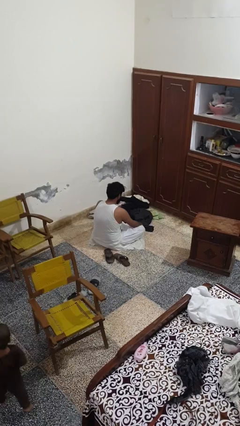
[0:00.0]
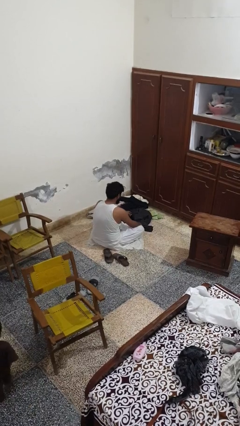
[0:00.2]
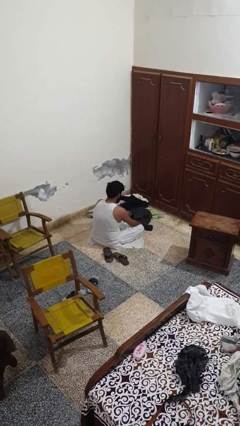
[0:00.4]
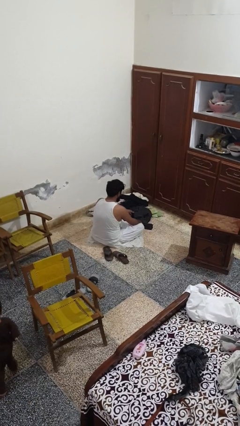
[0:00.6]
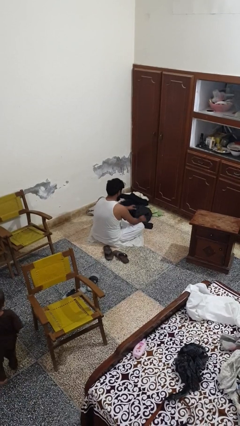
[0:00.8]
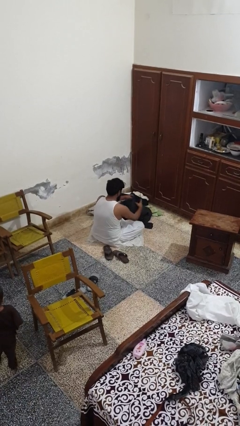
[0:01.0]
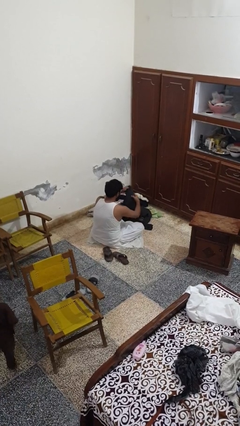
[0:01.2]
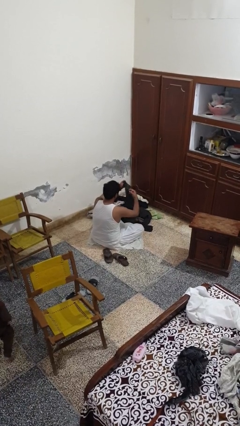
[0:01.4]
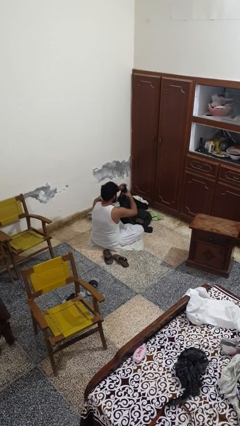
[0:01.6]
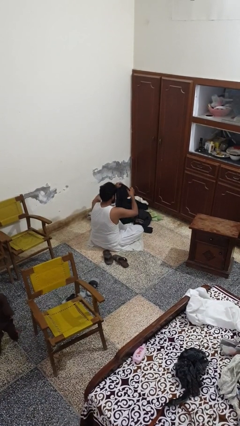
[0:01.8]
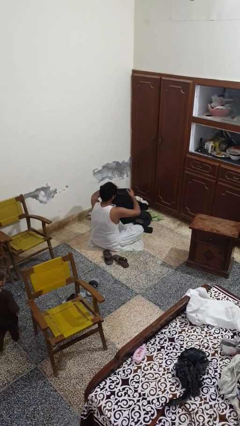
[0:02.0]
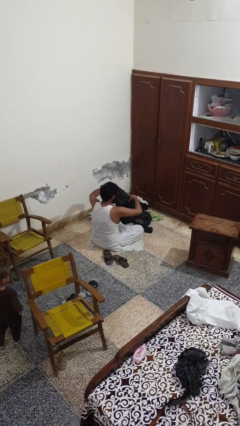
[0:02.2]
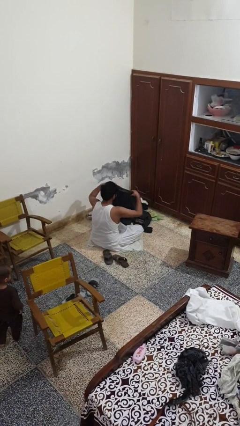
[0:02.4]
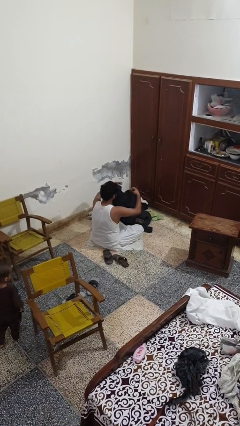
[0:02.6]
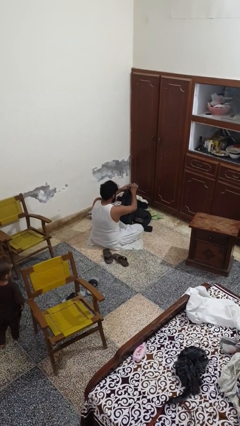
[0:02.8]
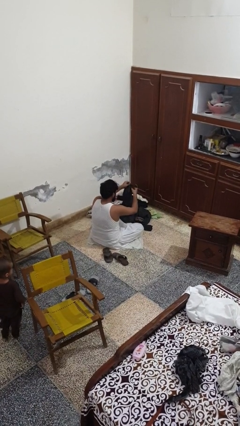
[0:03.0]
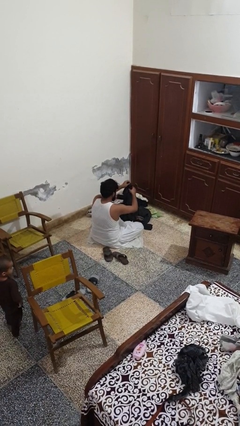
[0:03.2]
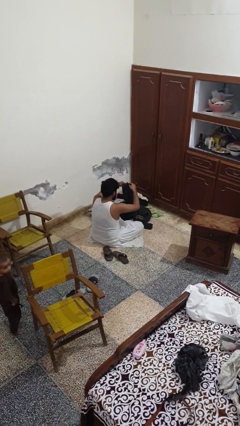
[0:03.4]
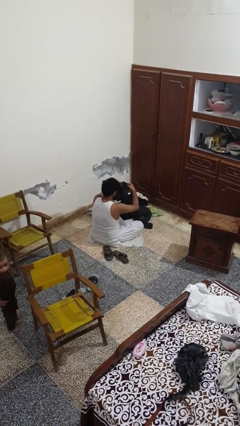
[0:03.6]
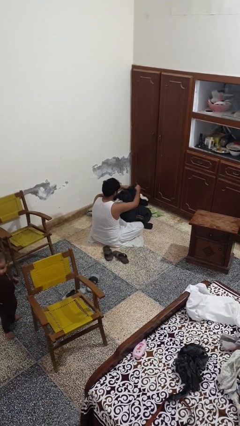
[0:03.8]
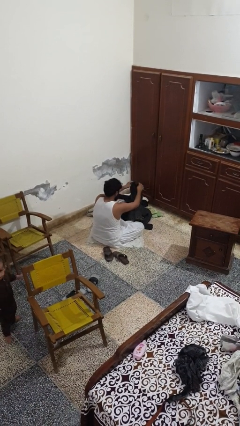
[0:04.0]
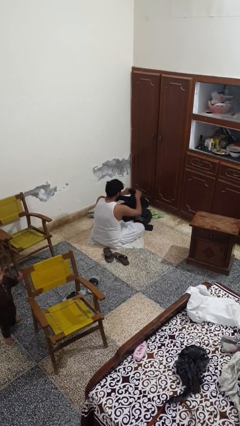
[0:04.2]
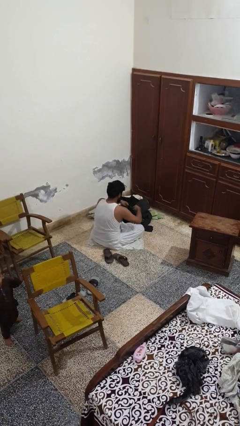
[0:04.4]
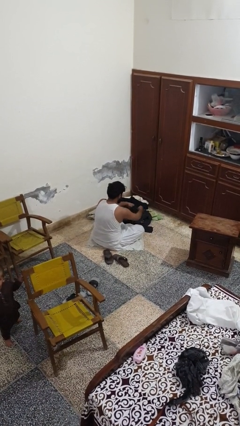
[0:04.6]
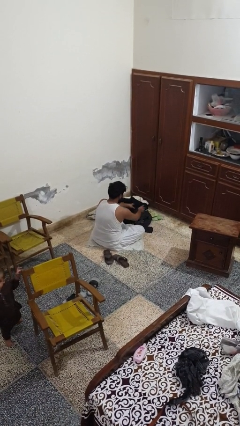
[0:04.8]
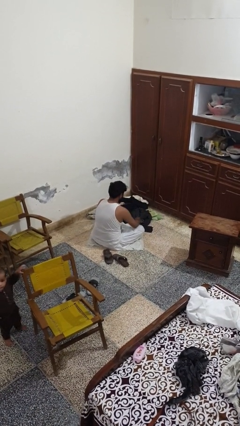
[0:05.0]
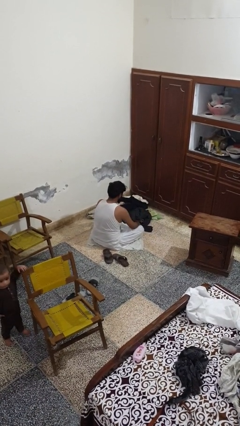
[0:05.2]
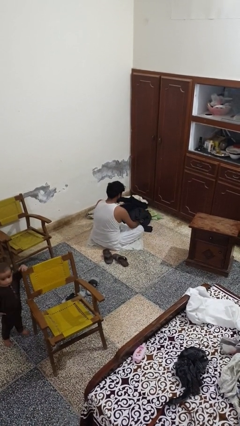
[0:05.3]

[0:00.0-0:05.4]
person folds shirt

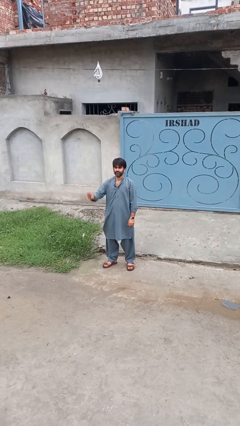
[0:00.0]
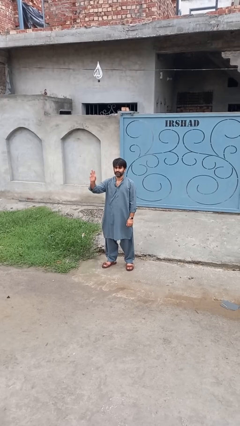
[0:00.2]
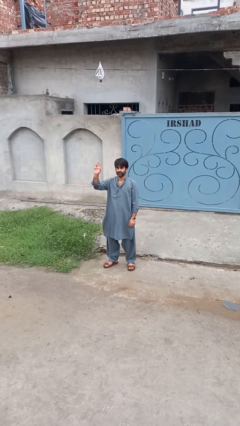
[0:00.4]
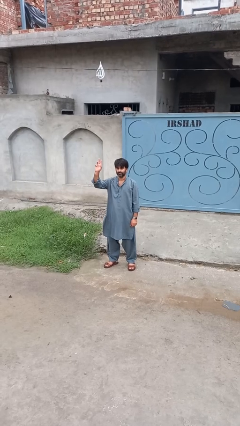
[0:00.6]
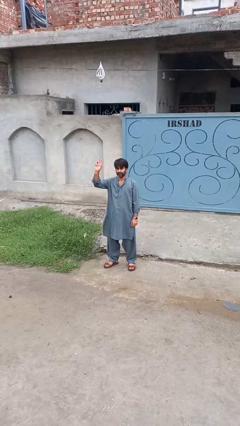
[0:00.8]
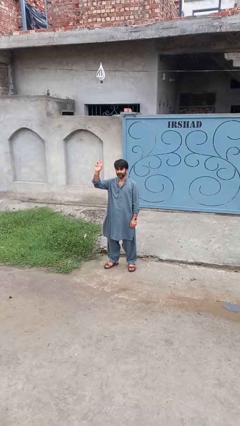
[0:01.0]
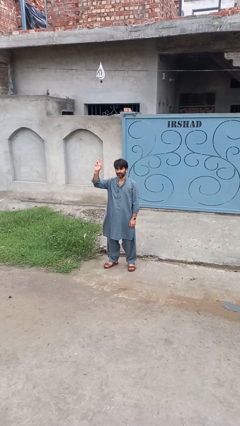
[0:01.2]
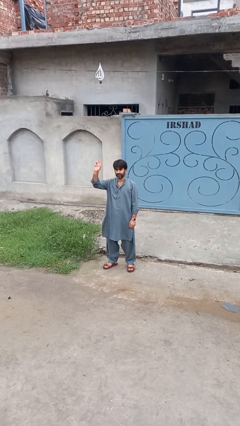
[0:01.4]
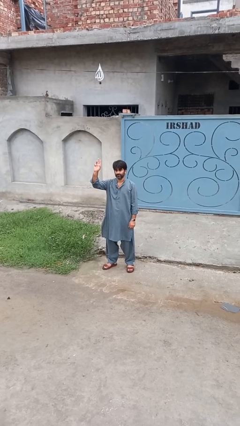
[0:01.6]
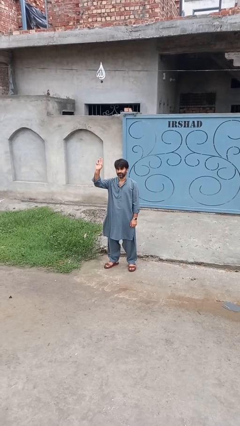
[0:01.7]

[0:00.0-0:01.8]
person gestures raise hand

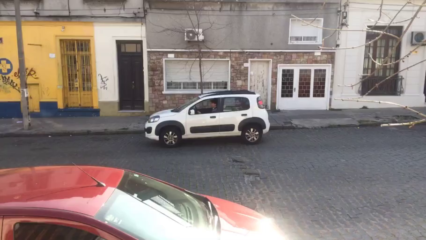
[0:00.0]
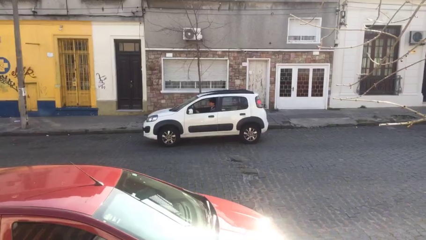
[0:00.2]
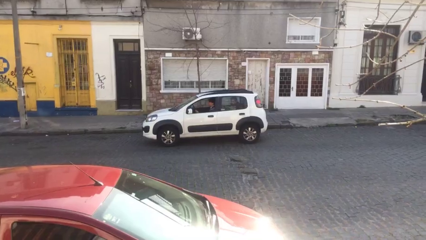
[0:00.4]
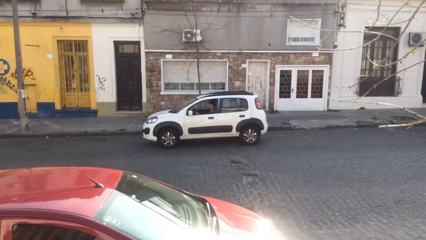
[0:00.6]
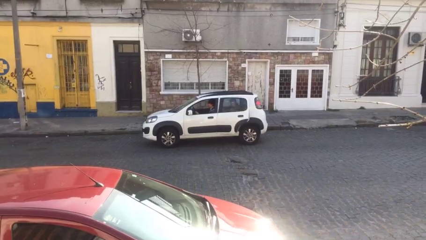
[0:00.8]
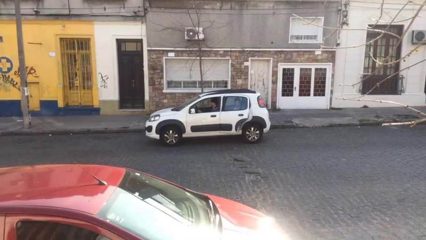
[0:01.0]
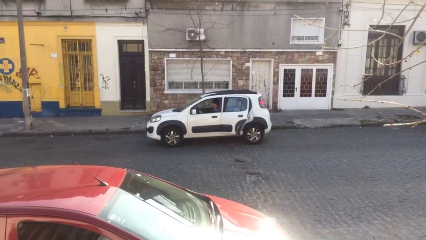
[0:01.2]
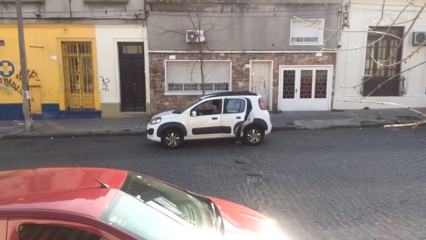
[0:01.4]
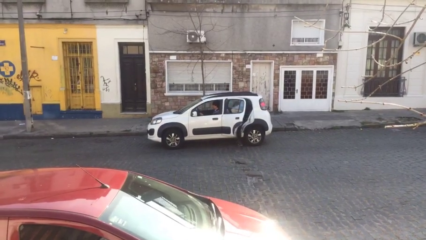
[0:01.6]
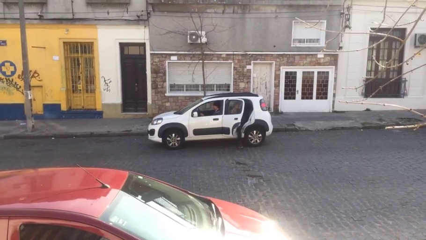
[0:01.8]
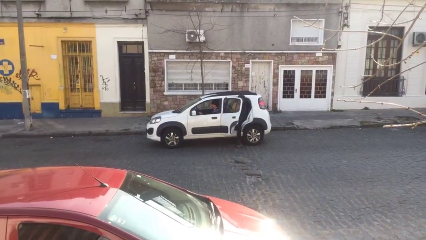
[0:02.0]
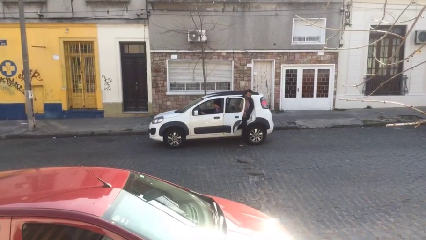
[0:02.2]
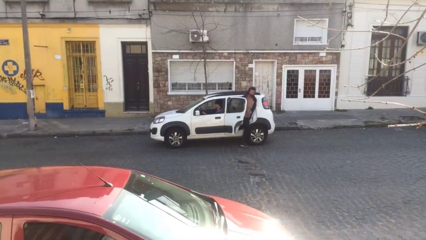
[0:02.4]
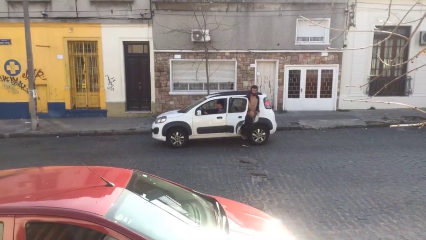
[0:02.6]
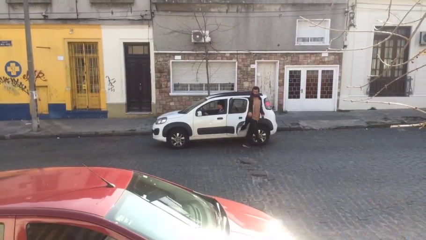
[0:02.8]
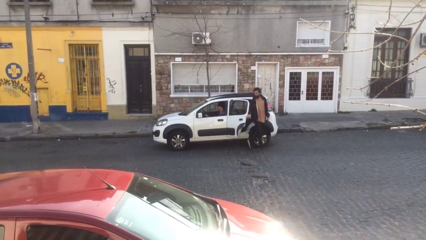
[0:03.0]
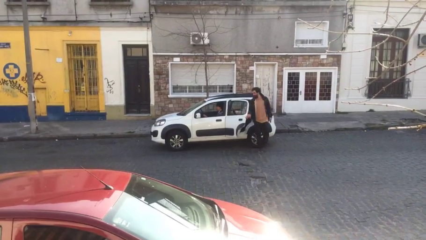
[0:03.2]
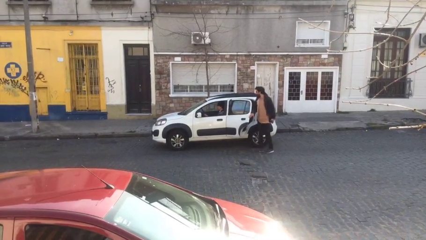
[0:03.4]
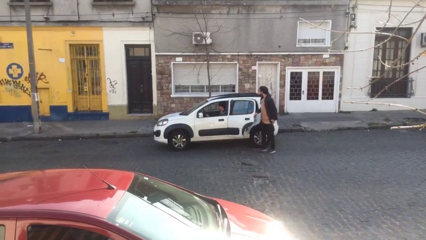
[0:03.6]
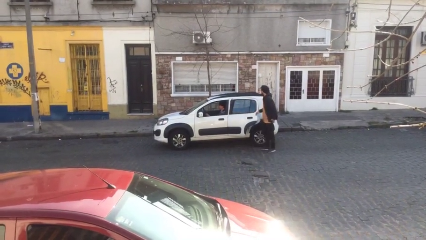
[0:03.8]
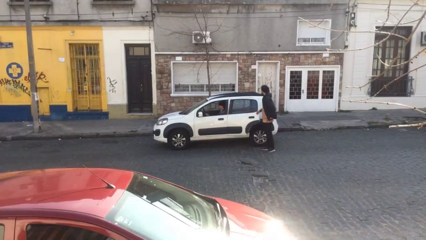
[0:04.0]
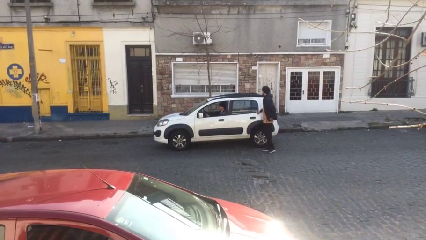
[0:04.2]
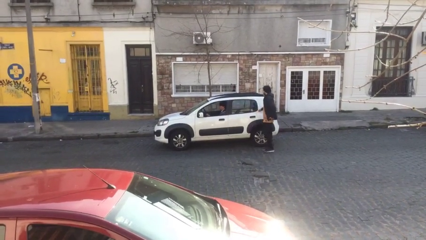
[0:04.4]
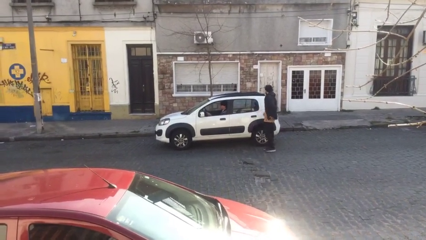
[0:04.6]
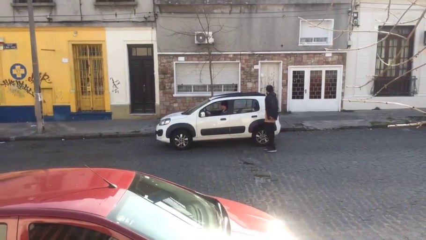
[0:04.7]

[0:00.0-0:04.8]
car drops off person

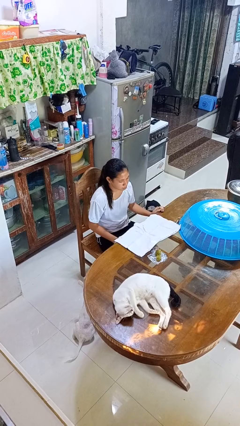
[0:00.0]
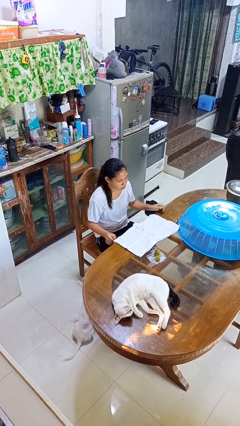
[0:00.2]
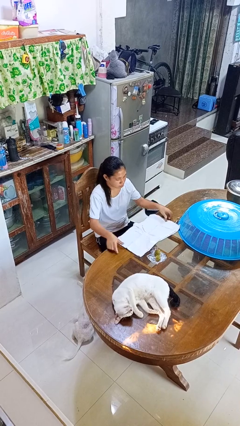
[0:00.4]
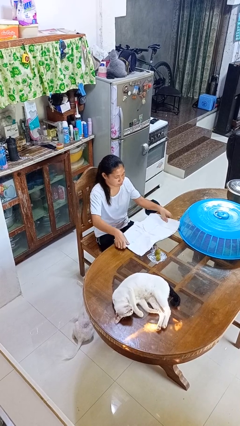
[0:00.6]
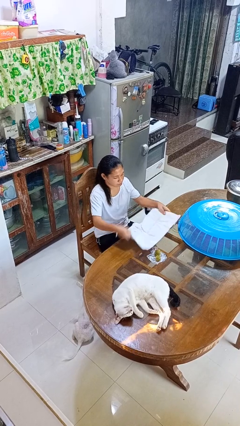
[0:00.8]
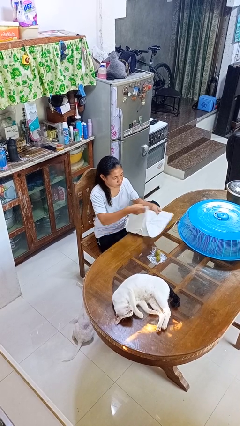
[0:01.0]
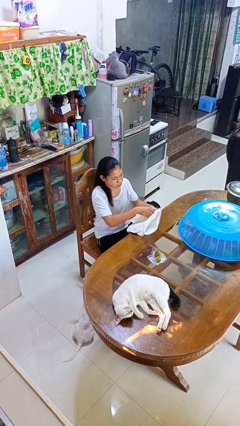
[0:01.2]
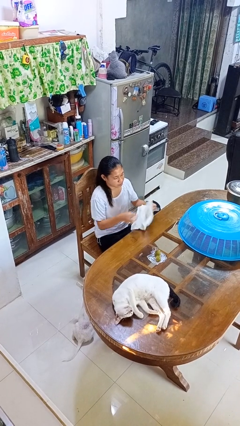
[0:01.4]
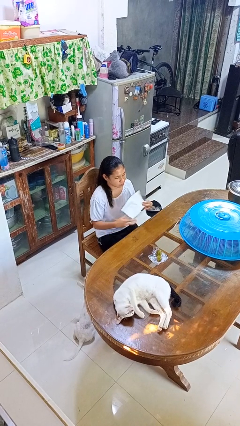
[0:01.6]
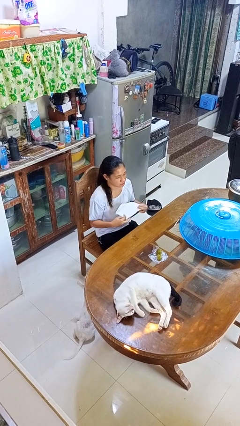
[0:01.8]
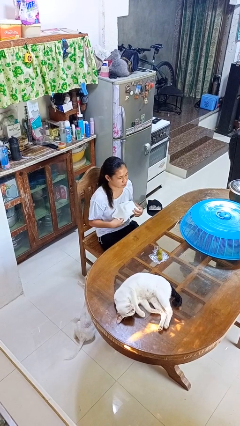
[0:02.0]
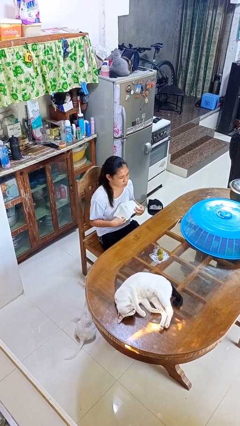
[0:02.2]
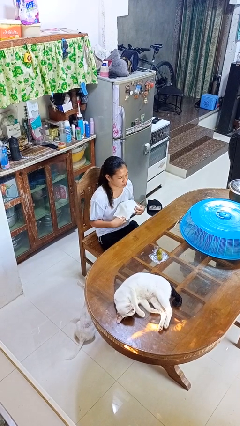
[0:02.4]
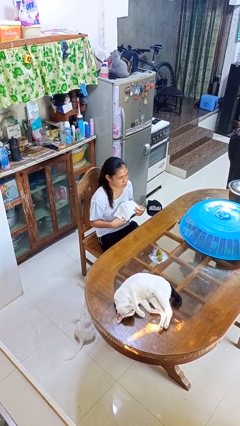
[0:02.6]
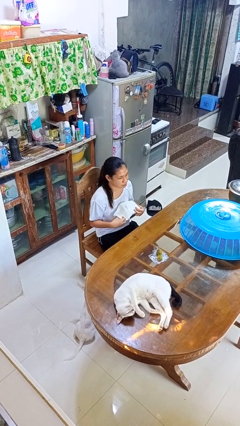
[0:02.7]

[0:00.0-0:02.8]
person folds tablecloth

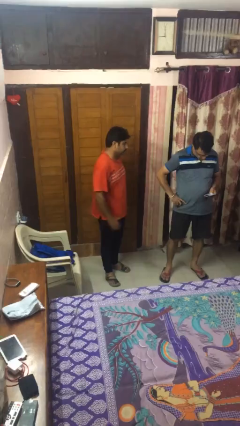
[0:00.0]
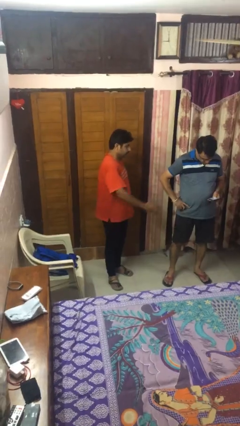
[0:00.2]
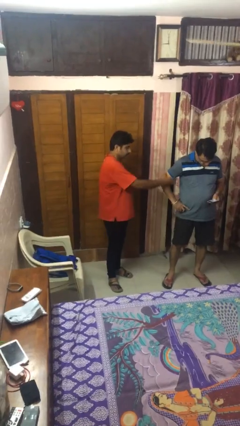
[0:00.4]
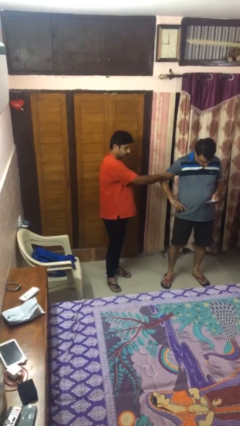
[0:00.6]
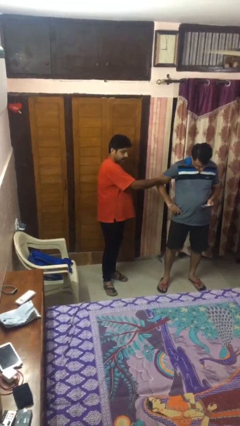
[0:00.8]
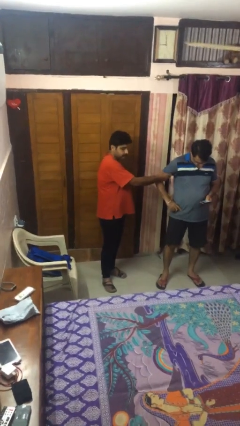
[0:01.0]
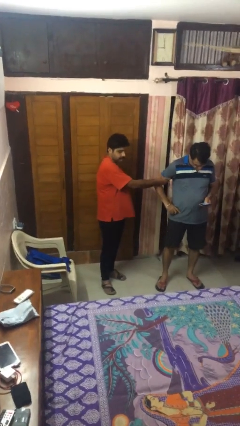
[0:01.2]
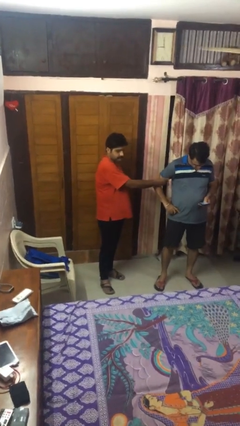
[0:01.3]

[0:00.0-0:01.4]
person grabs person by bicep

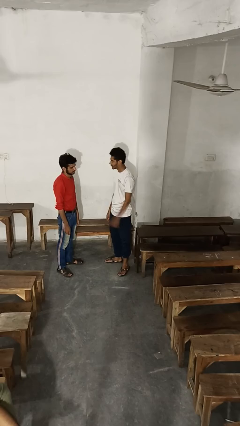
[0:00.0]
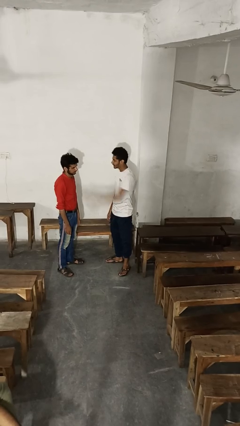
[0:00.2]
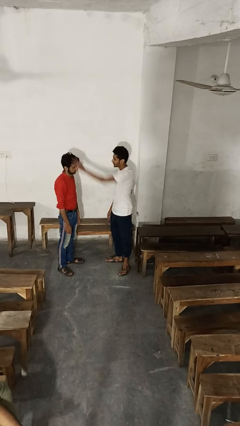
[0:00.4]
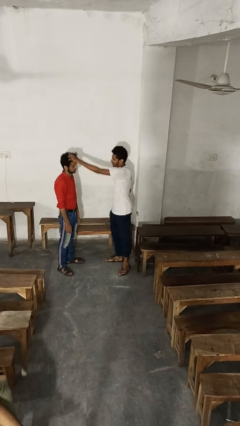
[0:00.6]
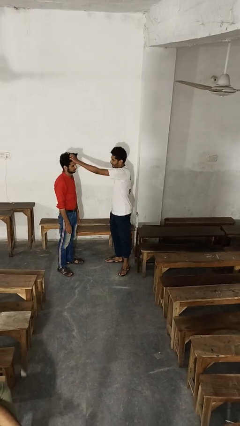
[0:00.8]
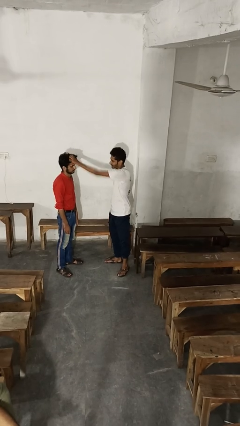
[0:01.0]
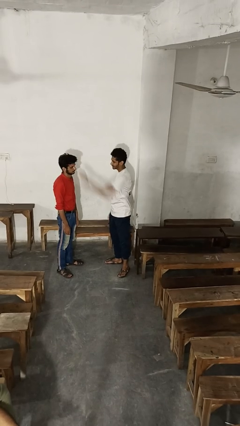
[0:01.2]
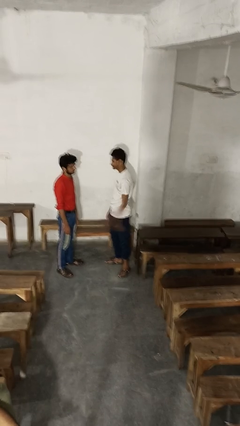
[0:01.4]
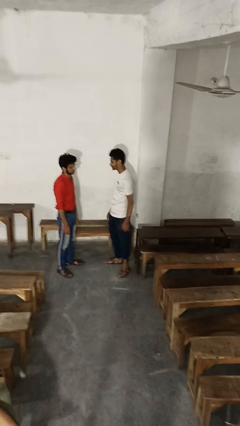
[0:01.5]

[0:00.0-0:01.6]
person grabs person by hair
